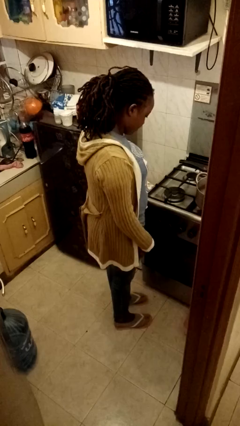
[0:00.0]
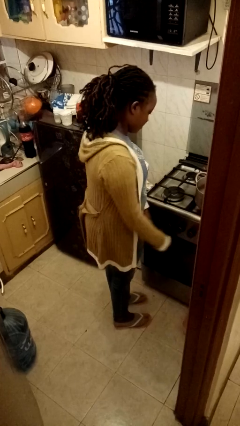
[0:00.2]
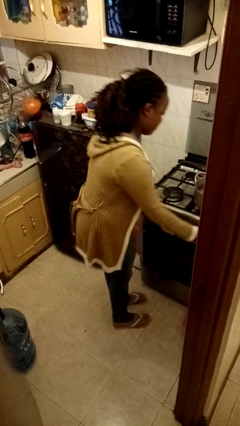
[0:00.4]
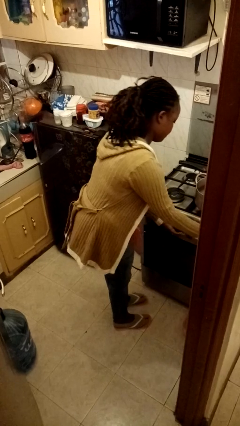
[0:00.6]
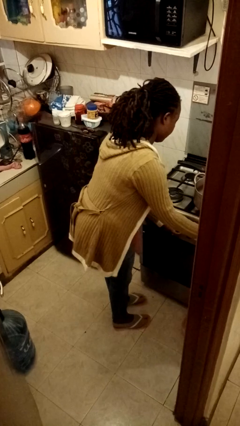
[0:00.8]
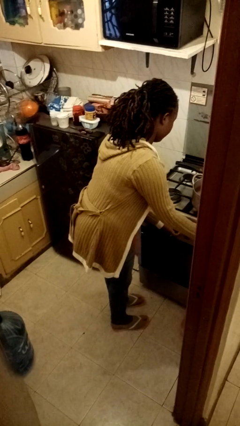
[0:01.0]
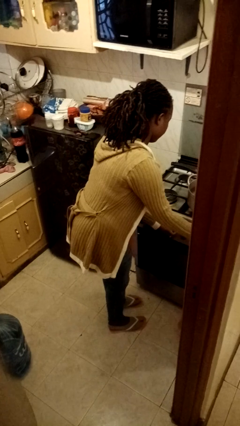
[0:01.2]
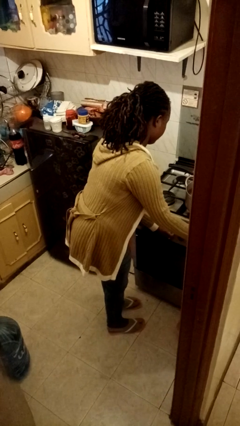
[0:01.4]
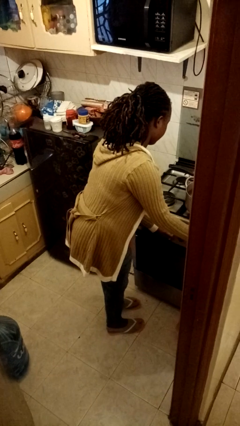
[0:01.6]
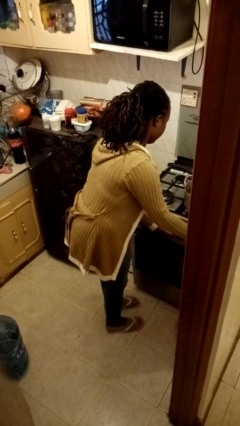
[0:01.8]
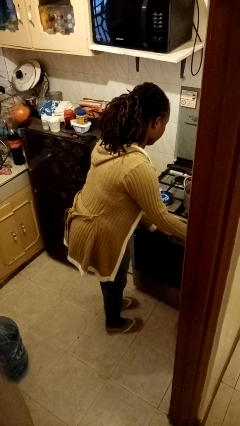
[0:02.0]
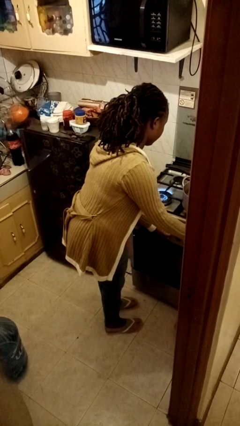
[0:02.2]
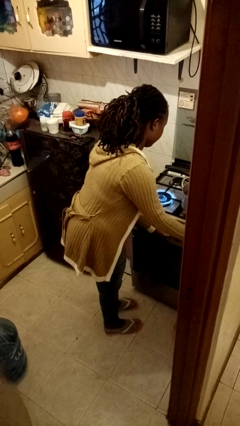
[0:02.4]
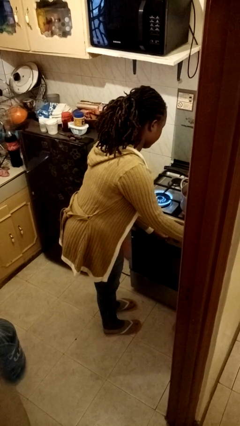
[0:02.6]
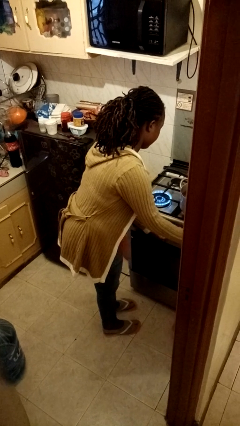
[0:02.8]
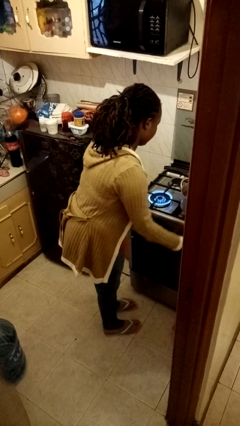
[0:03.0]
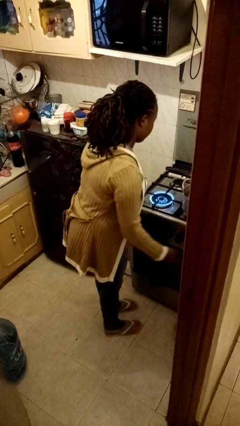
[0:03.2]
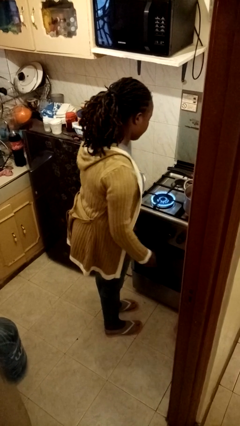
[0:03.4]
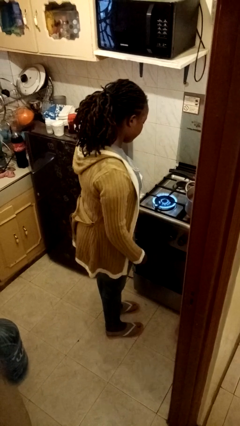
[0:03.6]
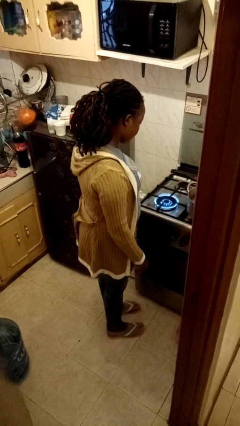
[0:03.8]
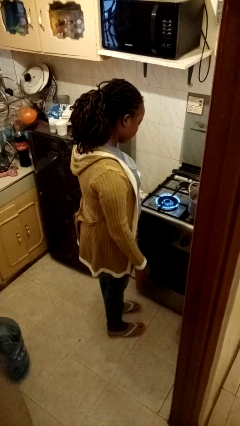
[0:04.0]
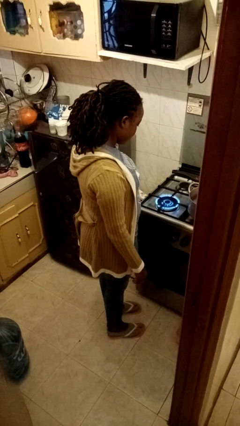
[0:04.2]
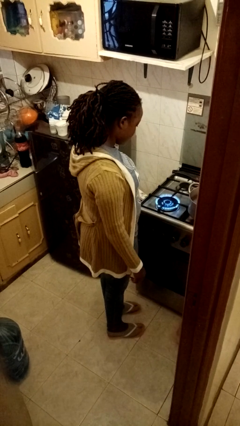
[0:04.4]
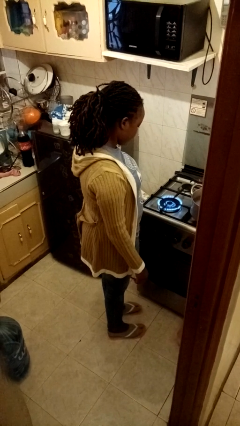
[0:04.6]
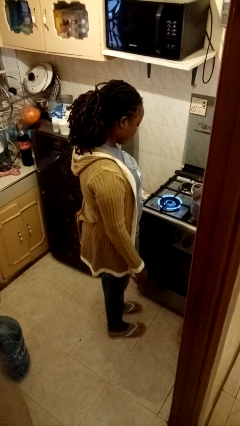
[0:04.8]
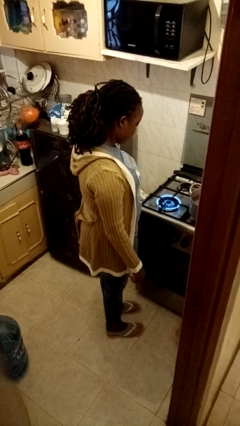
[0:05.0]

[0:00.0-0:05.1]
person turns on stovetop

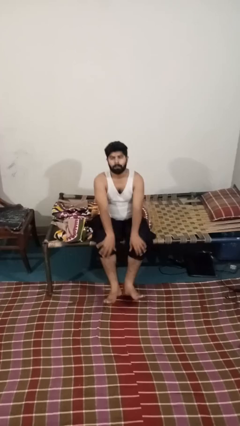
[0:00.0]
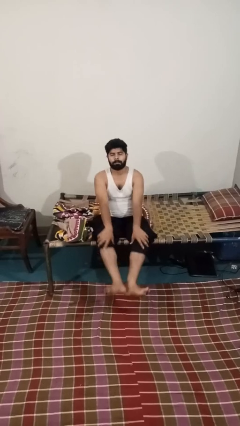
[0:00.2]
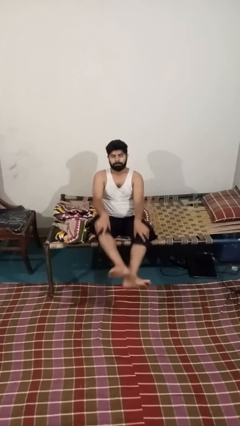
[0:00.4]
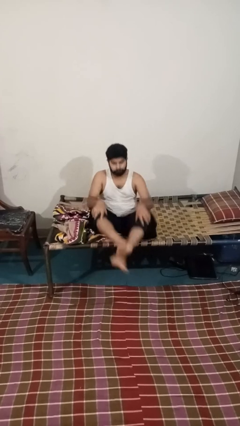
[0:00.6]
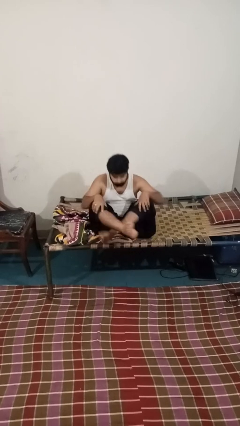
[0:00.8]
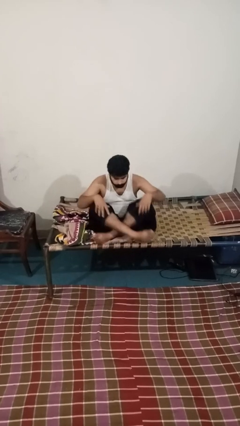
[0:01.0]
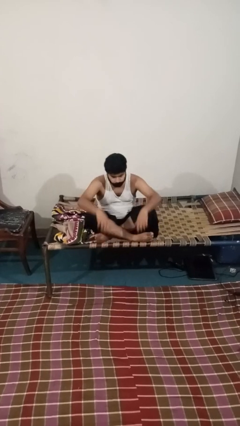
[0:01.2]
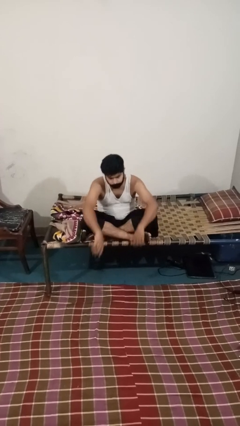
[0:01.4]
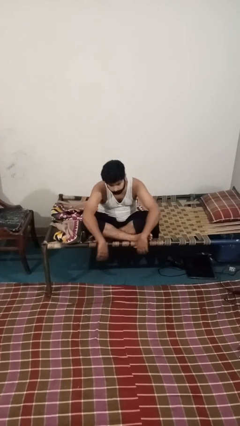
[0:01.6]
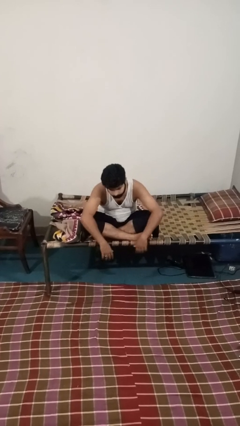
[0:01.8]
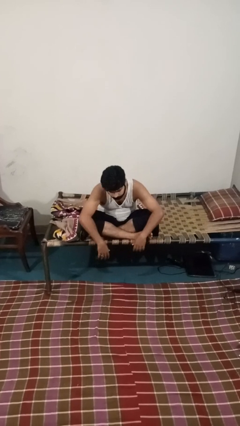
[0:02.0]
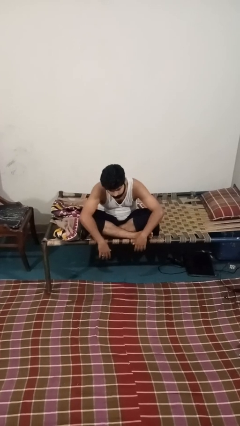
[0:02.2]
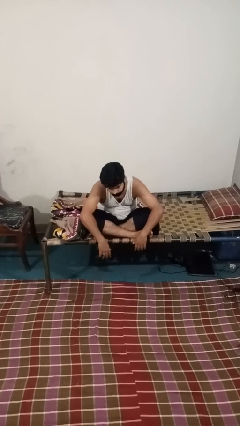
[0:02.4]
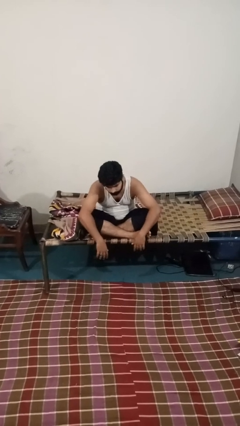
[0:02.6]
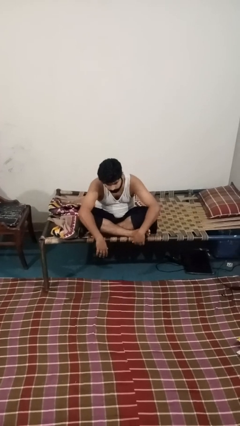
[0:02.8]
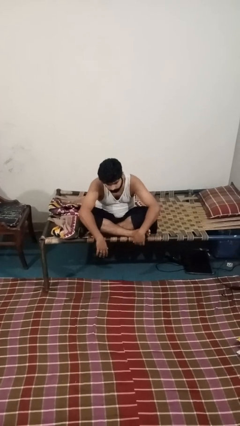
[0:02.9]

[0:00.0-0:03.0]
person crosses legs

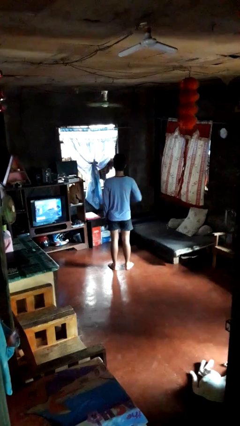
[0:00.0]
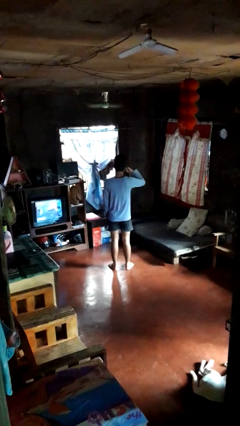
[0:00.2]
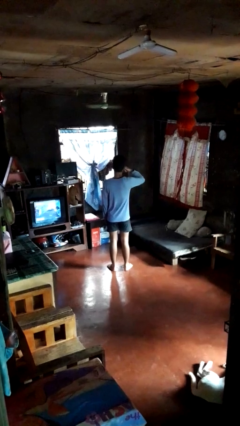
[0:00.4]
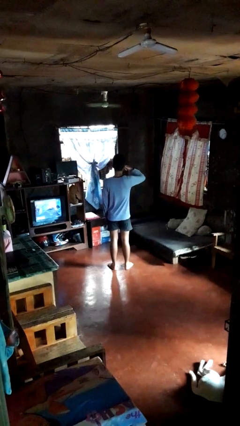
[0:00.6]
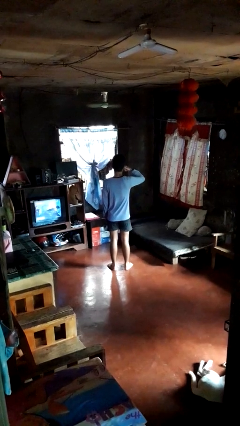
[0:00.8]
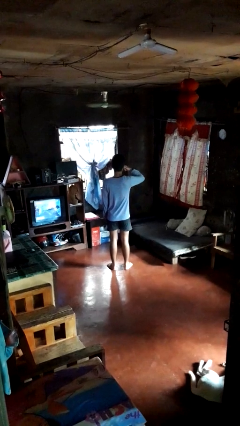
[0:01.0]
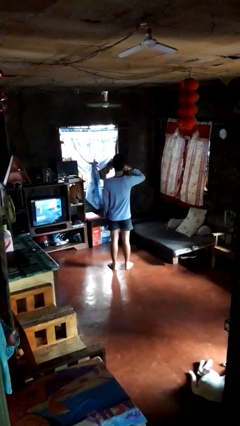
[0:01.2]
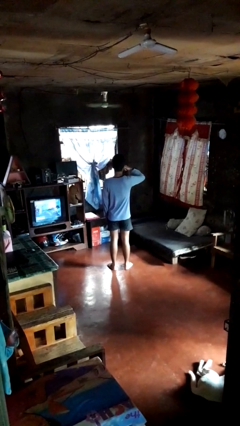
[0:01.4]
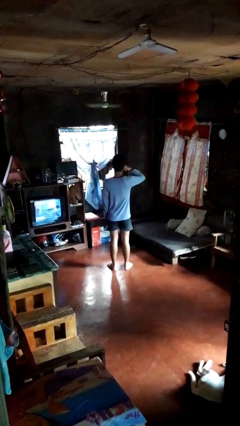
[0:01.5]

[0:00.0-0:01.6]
person gestures call me

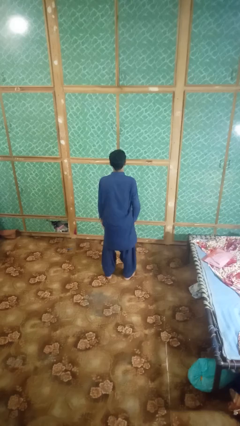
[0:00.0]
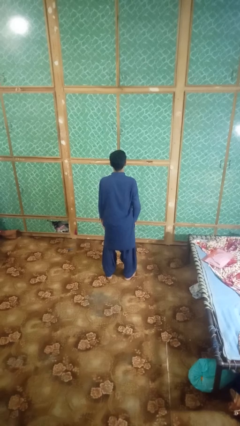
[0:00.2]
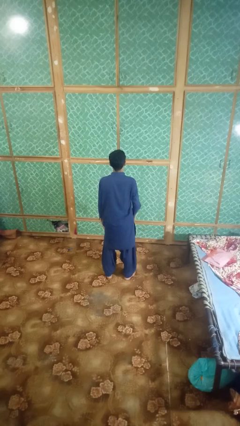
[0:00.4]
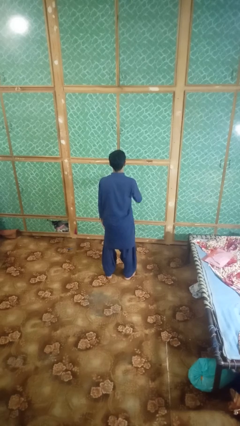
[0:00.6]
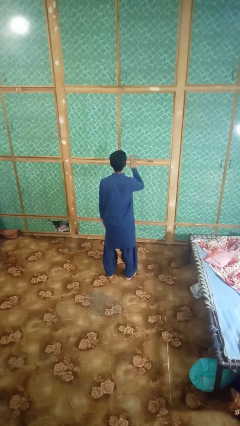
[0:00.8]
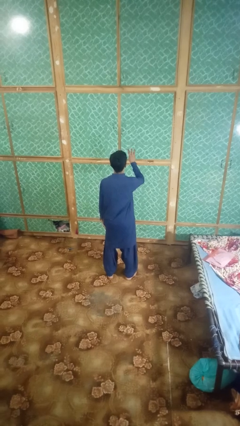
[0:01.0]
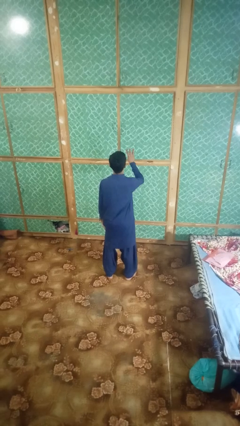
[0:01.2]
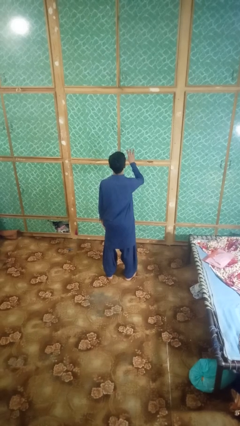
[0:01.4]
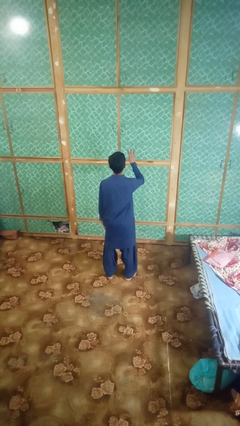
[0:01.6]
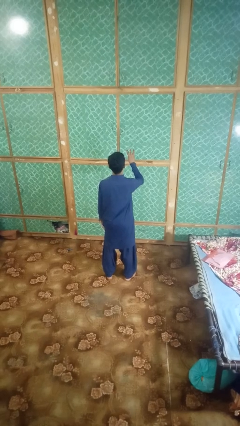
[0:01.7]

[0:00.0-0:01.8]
person gestures number three

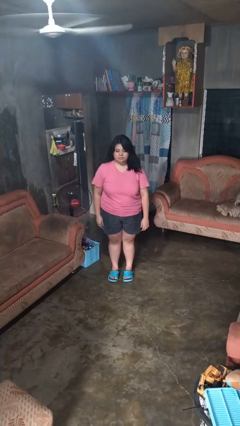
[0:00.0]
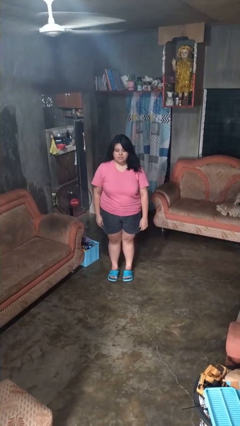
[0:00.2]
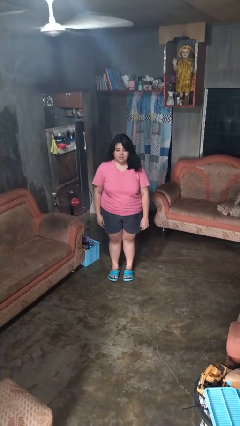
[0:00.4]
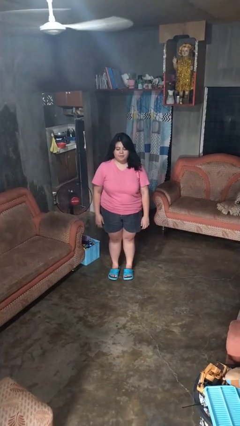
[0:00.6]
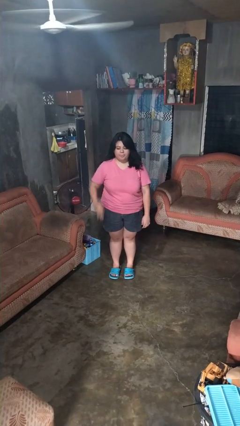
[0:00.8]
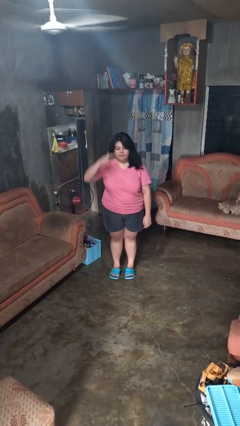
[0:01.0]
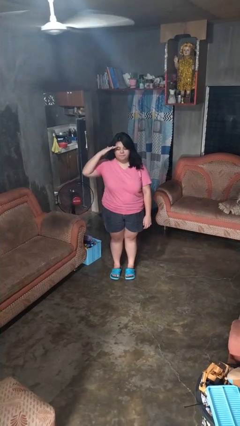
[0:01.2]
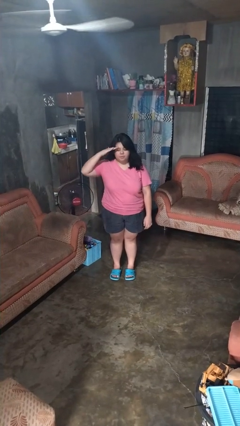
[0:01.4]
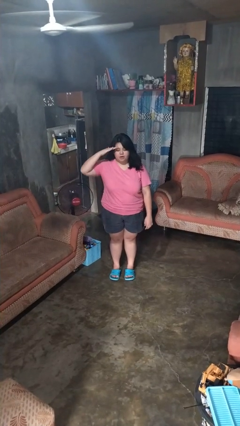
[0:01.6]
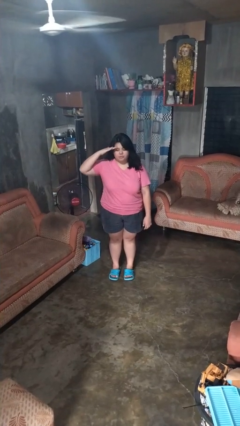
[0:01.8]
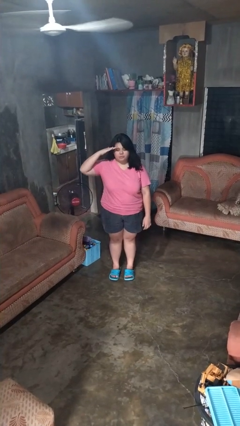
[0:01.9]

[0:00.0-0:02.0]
person salutes

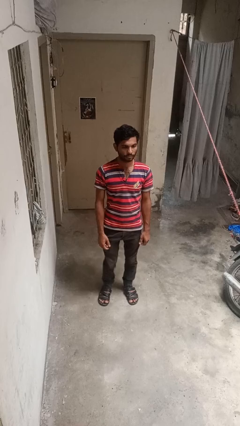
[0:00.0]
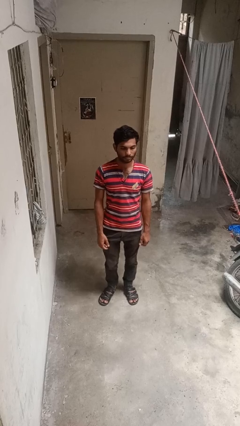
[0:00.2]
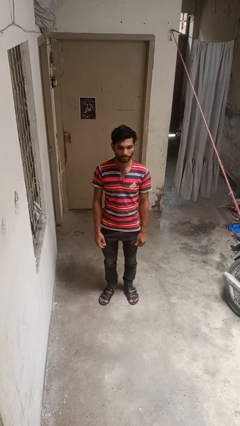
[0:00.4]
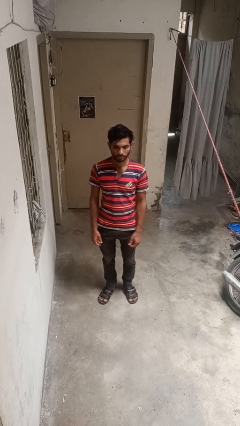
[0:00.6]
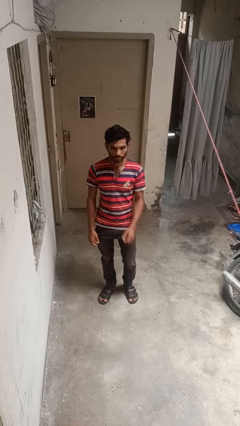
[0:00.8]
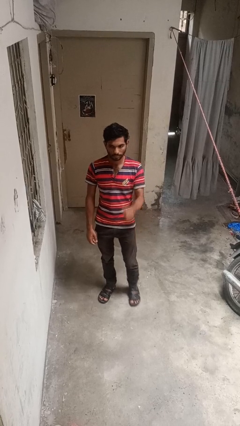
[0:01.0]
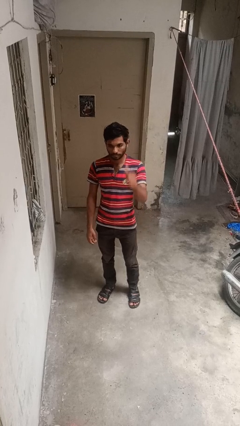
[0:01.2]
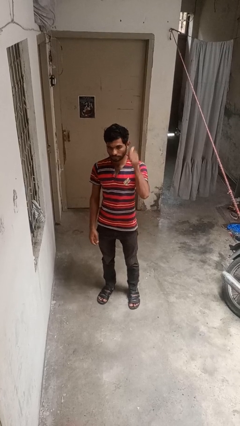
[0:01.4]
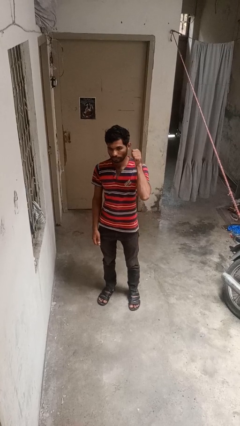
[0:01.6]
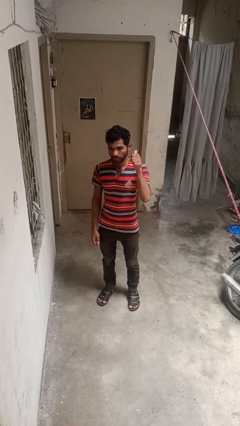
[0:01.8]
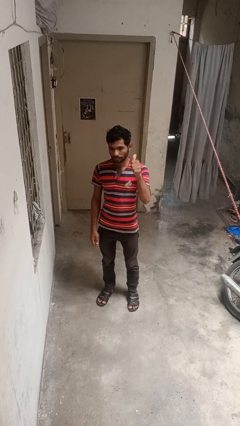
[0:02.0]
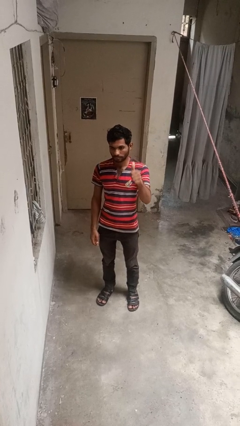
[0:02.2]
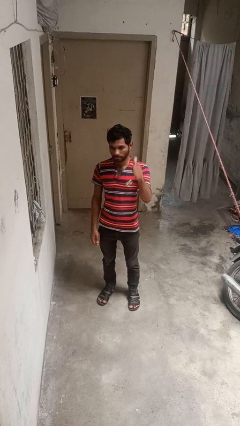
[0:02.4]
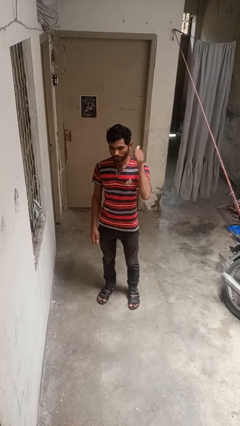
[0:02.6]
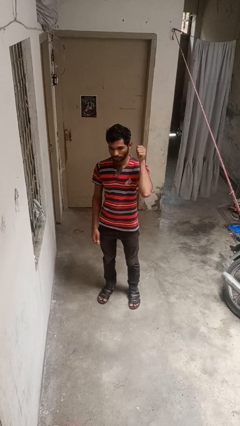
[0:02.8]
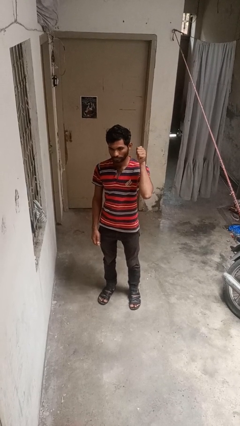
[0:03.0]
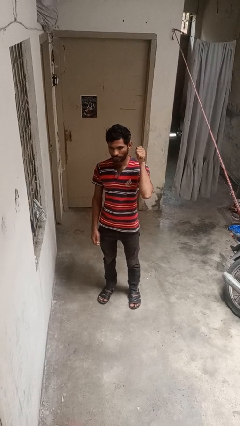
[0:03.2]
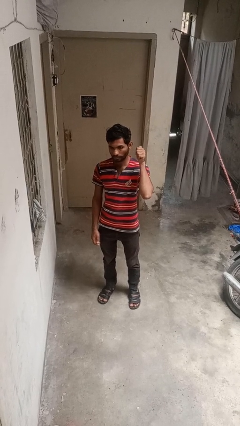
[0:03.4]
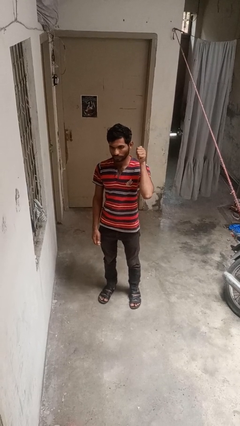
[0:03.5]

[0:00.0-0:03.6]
person gestures behind me

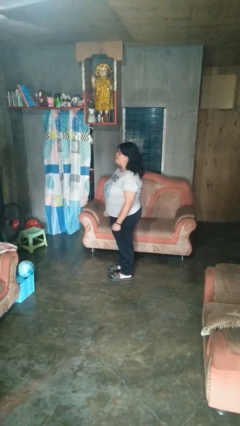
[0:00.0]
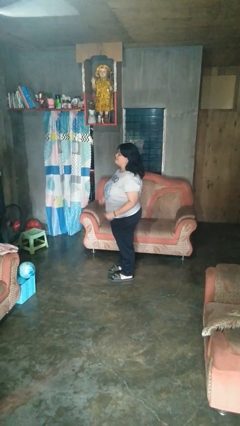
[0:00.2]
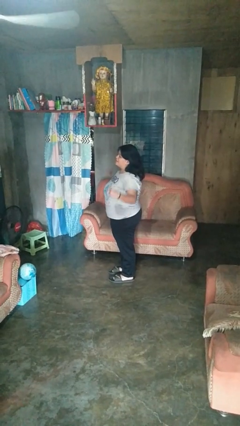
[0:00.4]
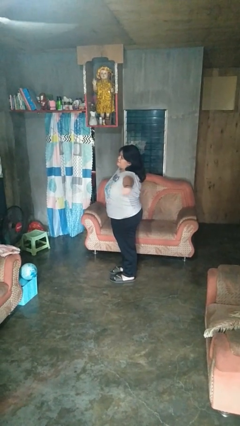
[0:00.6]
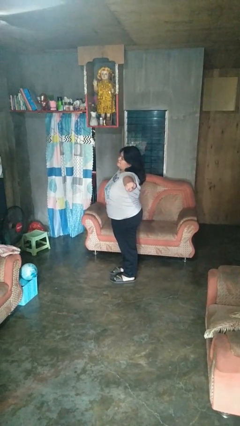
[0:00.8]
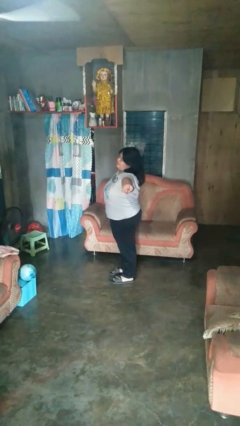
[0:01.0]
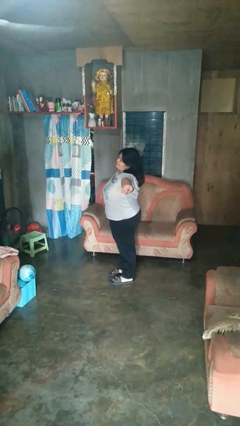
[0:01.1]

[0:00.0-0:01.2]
person stretches arms to side
